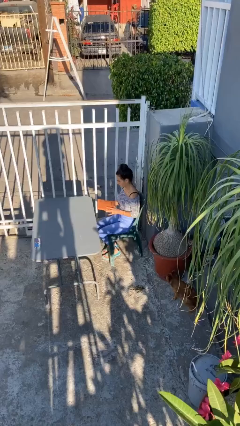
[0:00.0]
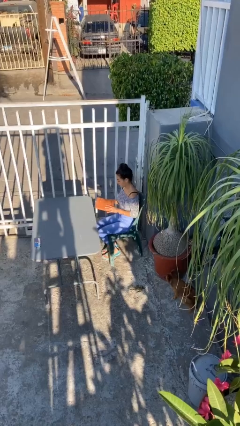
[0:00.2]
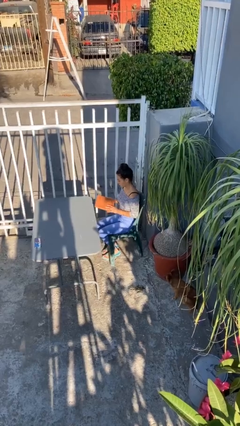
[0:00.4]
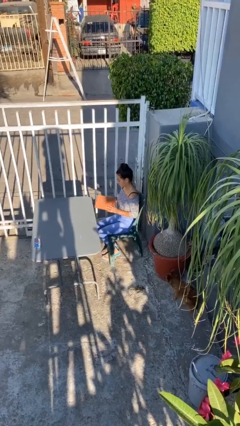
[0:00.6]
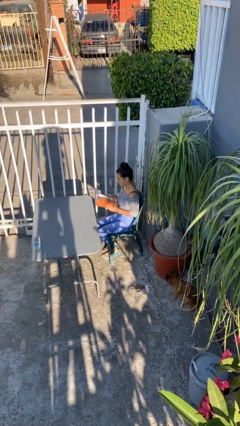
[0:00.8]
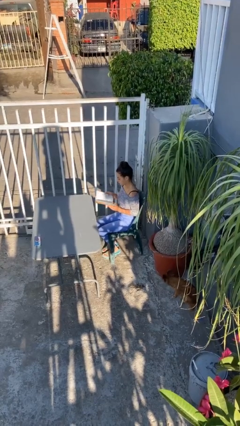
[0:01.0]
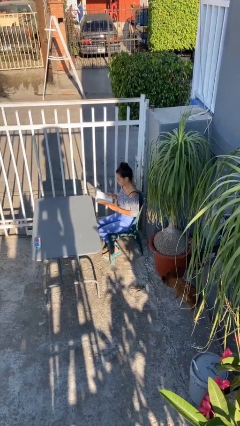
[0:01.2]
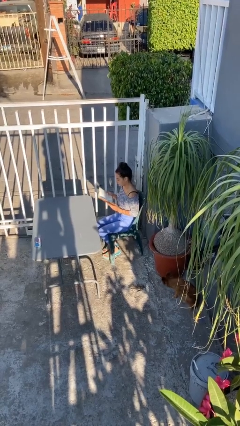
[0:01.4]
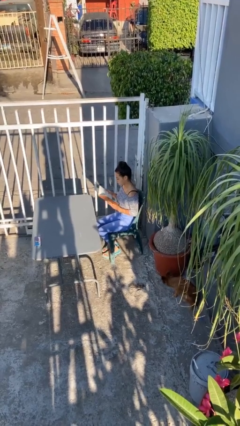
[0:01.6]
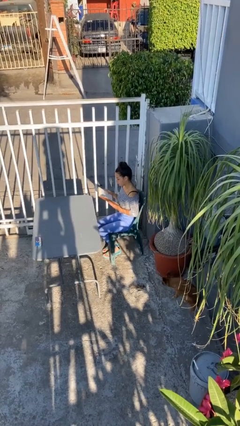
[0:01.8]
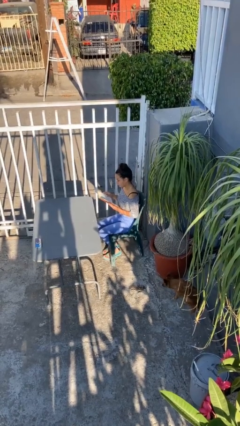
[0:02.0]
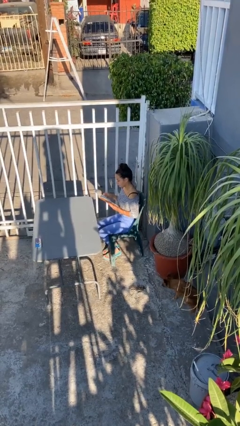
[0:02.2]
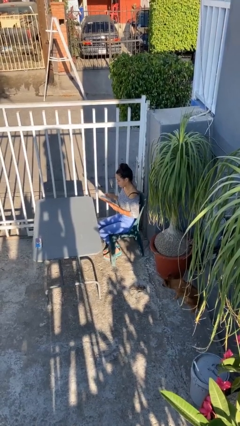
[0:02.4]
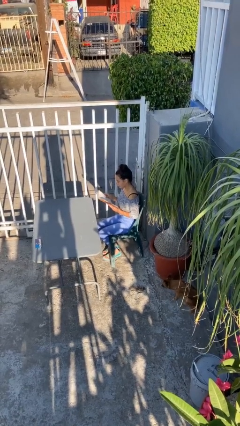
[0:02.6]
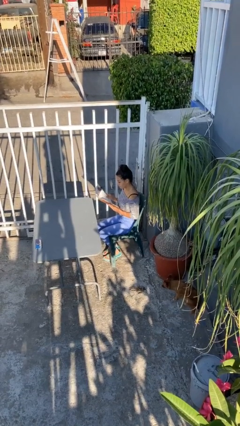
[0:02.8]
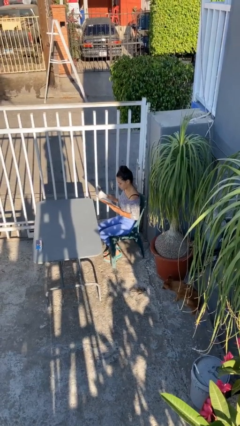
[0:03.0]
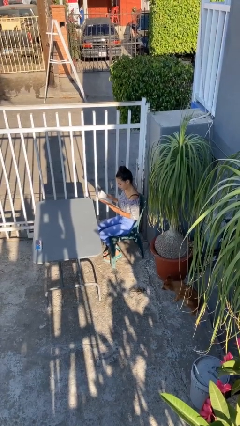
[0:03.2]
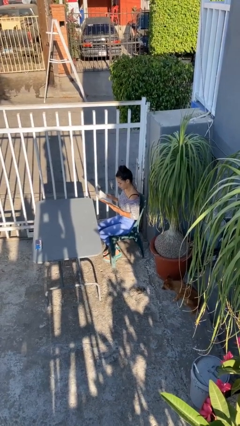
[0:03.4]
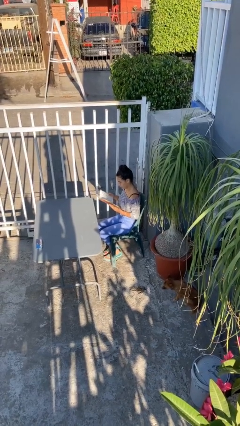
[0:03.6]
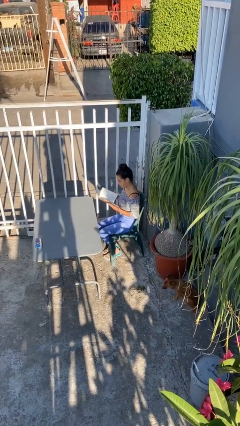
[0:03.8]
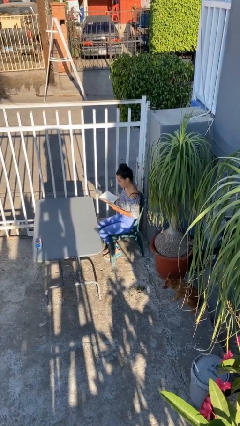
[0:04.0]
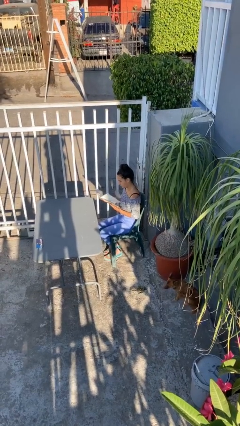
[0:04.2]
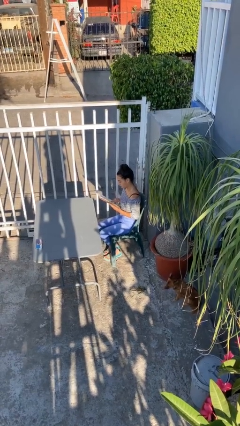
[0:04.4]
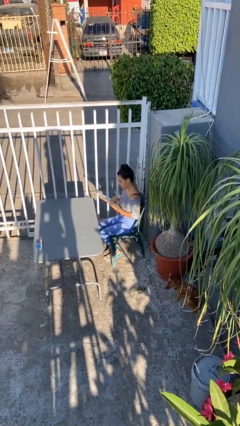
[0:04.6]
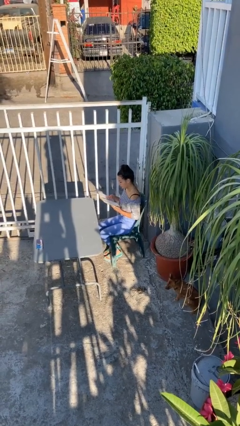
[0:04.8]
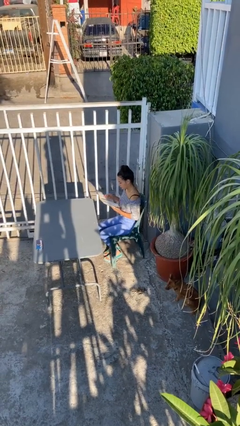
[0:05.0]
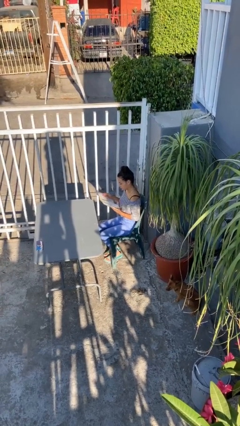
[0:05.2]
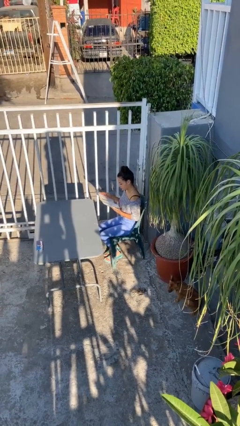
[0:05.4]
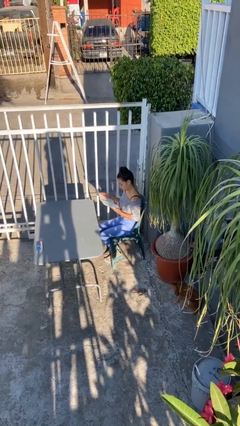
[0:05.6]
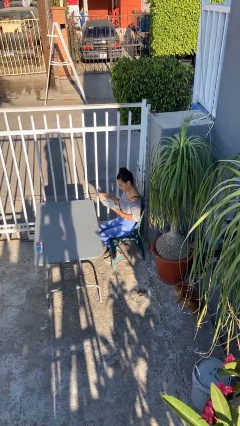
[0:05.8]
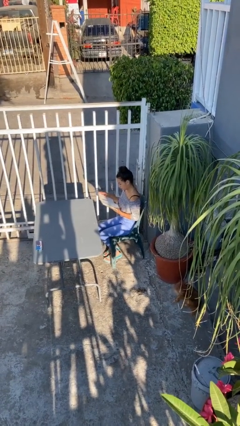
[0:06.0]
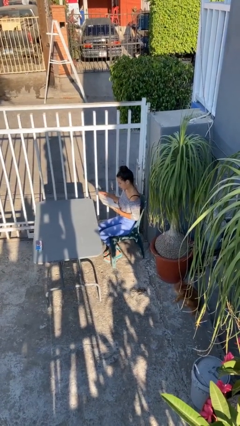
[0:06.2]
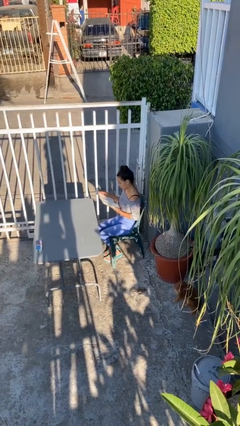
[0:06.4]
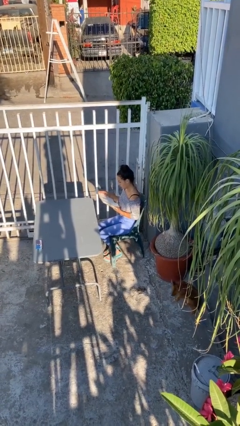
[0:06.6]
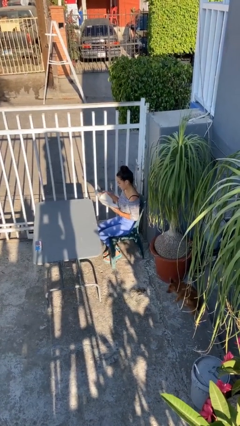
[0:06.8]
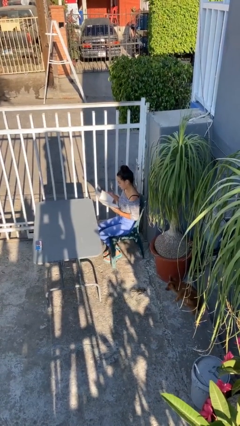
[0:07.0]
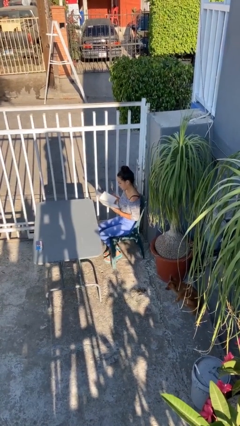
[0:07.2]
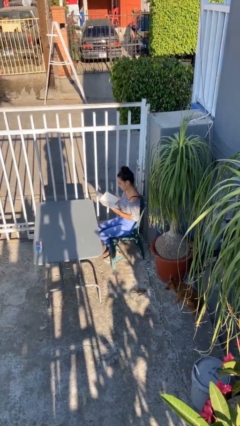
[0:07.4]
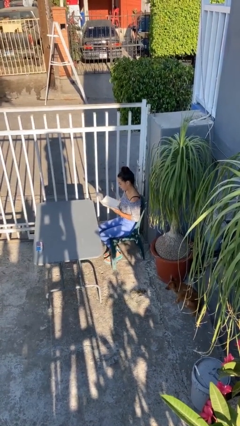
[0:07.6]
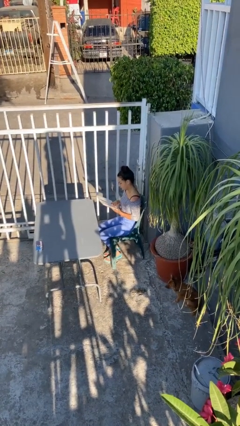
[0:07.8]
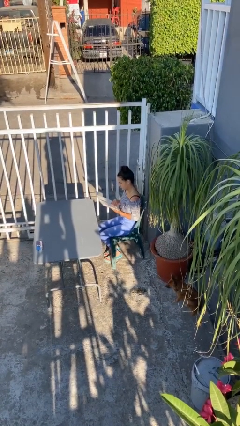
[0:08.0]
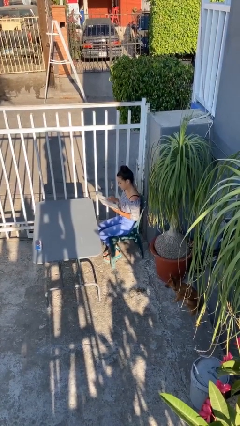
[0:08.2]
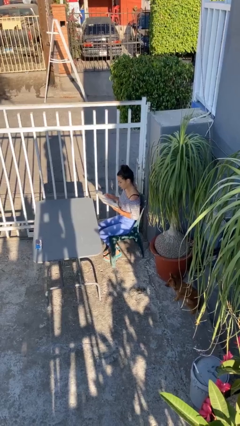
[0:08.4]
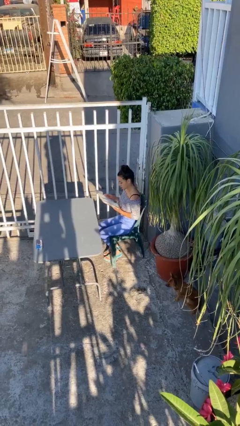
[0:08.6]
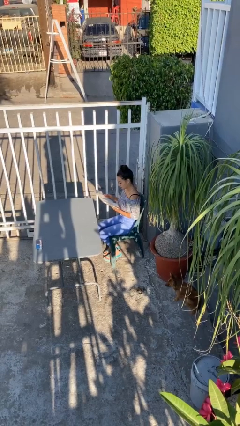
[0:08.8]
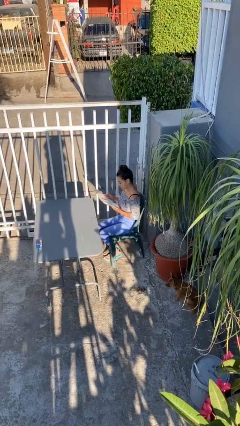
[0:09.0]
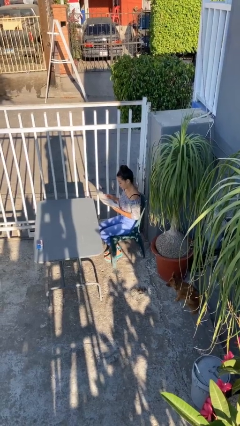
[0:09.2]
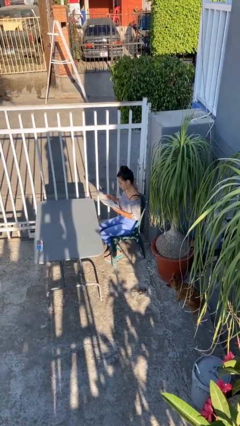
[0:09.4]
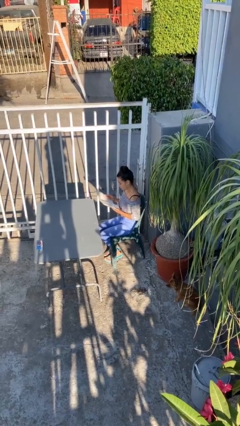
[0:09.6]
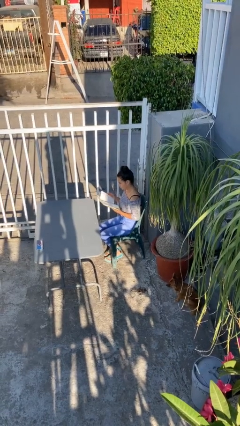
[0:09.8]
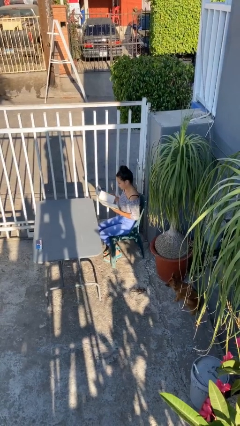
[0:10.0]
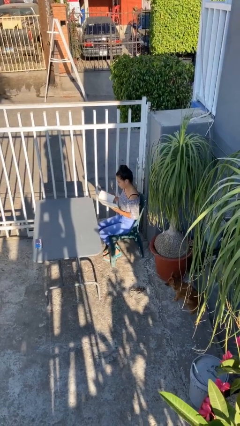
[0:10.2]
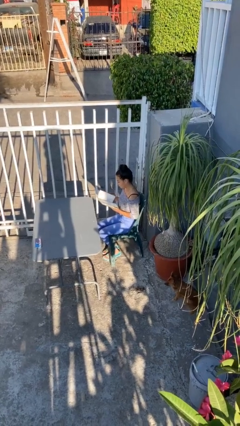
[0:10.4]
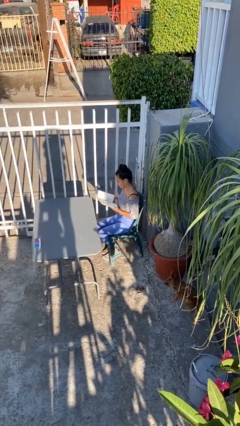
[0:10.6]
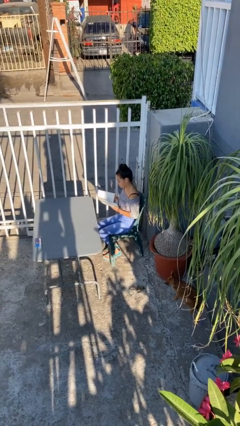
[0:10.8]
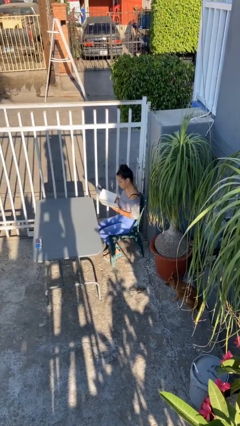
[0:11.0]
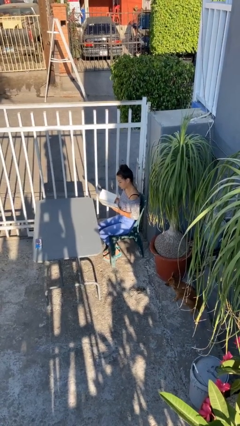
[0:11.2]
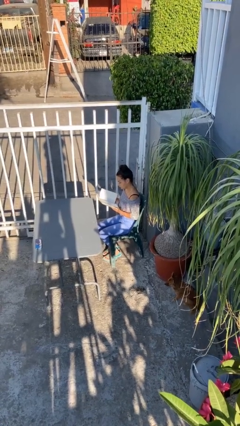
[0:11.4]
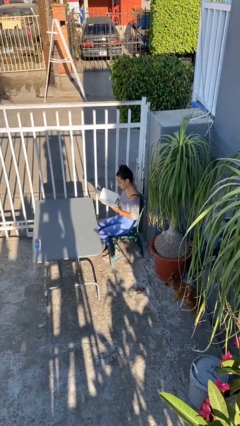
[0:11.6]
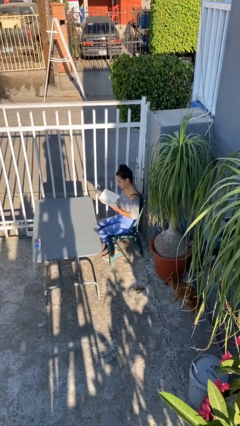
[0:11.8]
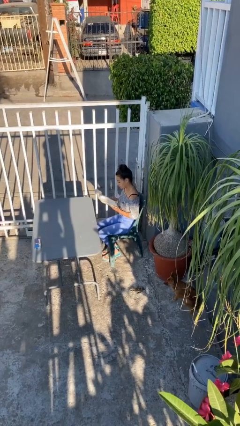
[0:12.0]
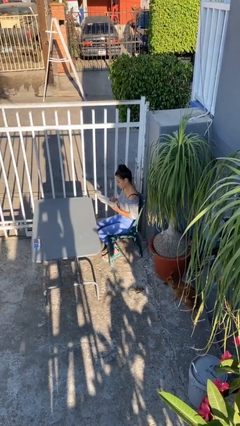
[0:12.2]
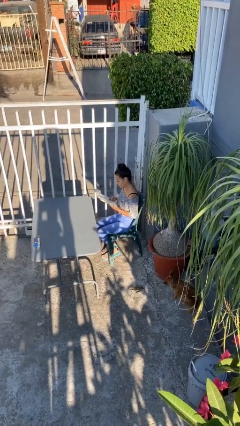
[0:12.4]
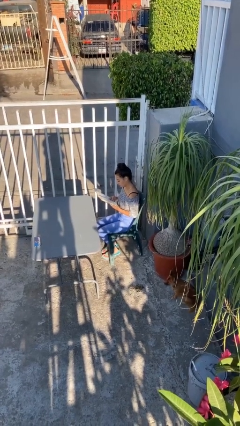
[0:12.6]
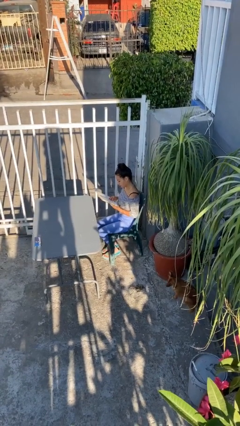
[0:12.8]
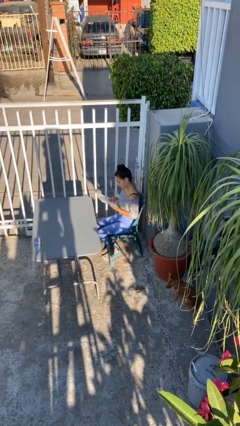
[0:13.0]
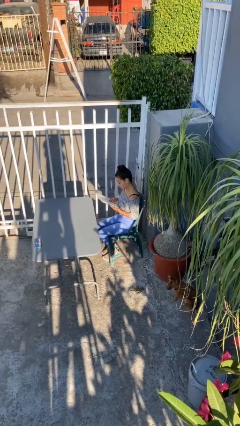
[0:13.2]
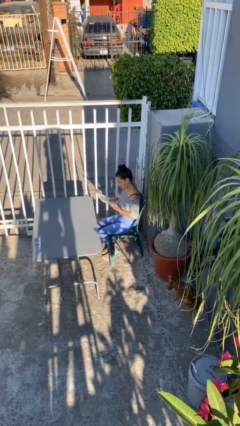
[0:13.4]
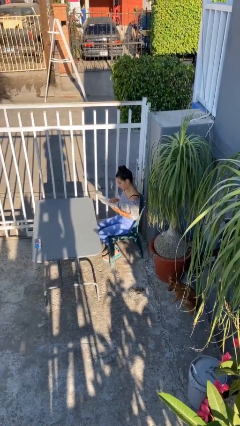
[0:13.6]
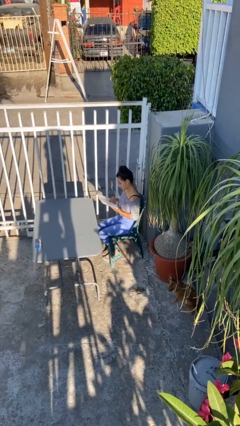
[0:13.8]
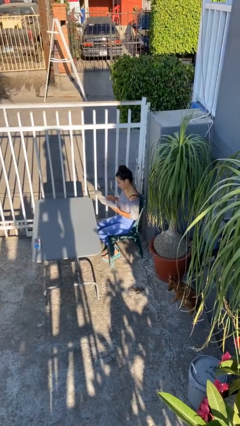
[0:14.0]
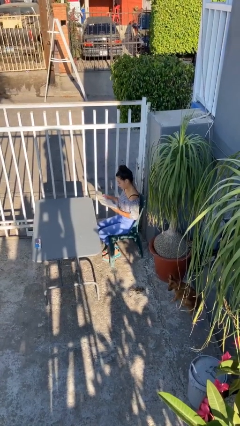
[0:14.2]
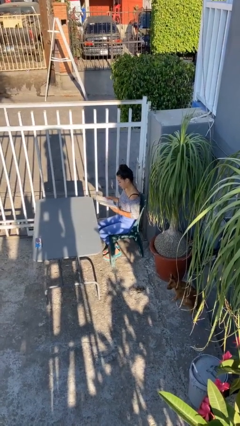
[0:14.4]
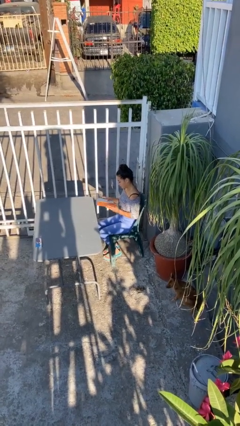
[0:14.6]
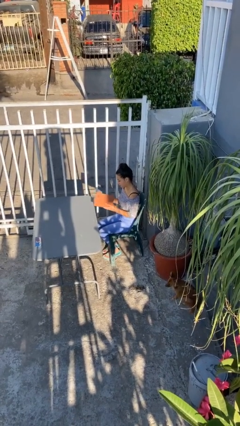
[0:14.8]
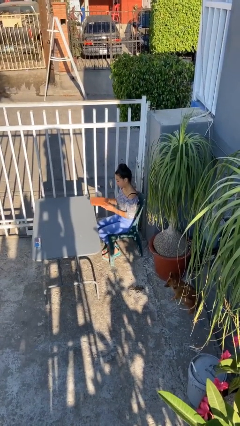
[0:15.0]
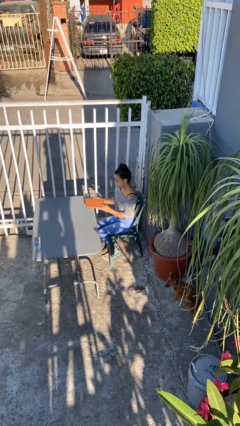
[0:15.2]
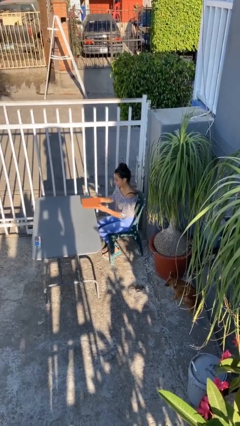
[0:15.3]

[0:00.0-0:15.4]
person reads document

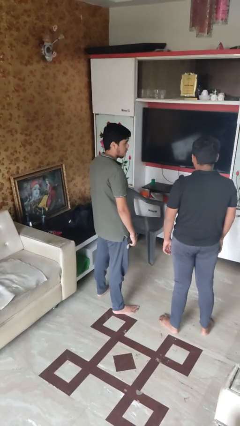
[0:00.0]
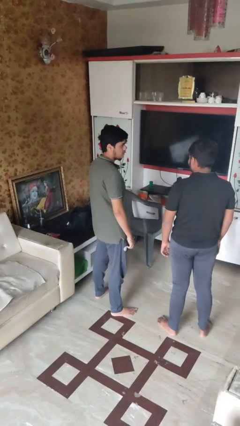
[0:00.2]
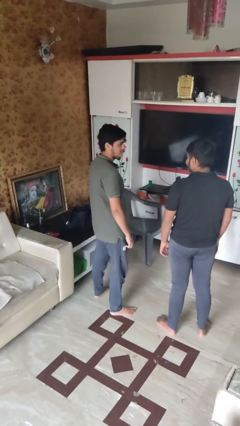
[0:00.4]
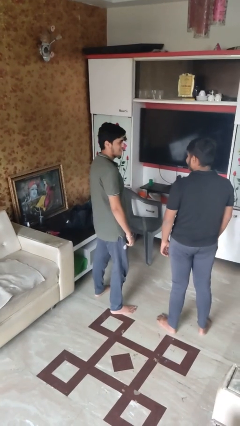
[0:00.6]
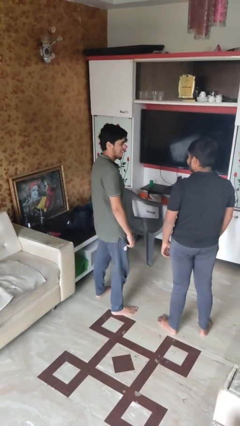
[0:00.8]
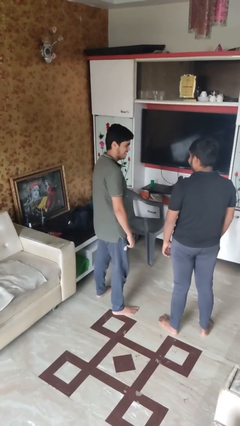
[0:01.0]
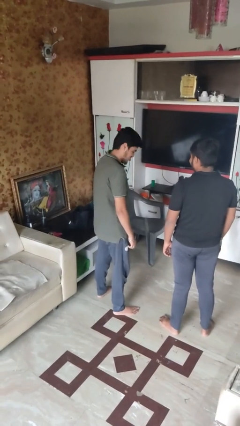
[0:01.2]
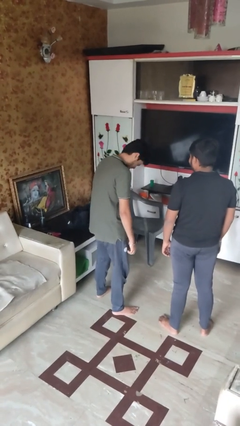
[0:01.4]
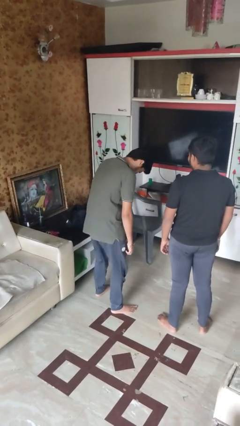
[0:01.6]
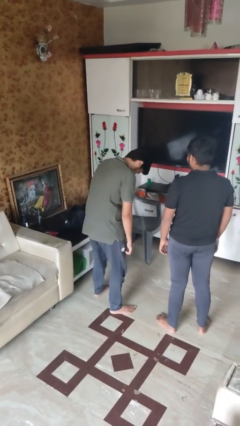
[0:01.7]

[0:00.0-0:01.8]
person laughs with person

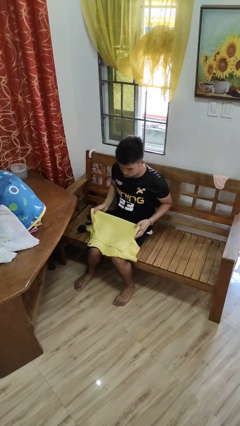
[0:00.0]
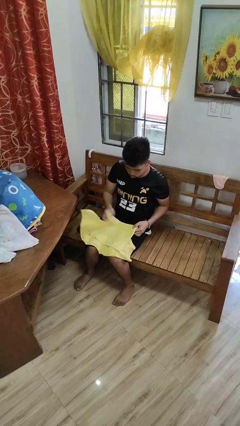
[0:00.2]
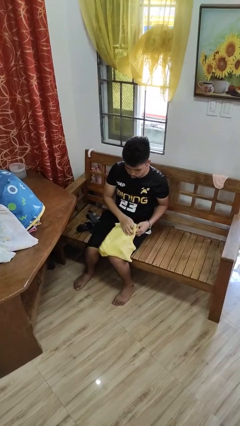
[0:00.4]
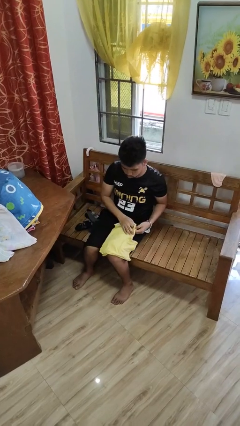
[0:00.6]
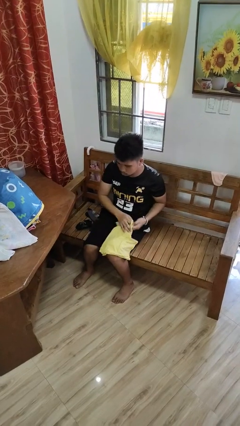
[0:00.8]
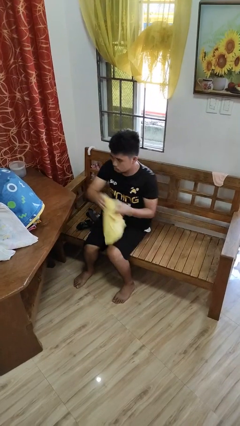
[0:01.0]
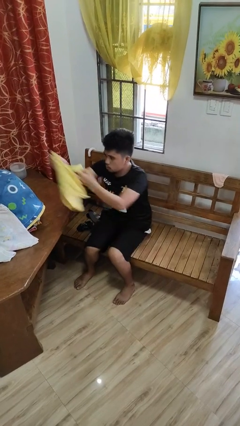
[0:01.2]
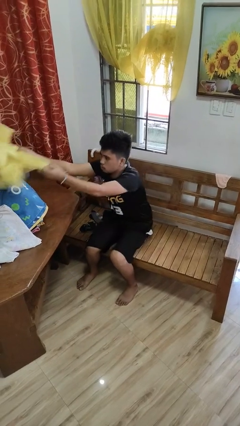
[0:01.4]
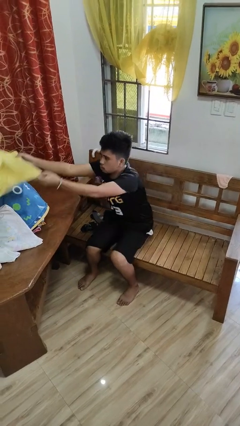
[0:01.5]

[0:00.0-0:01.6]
person folds shirt
